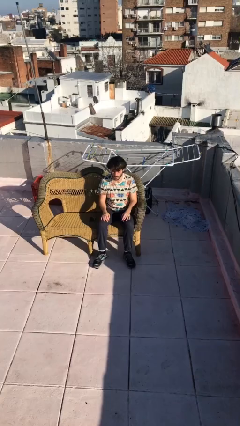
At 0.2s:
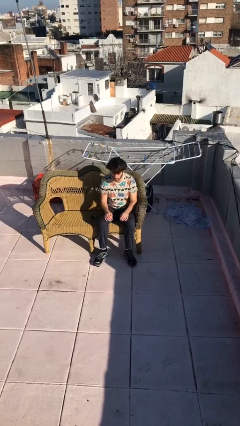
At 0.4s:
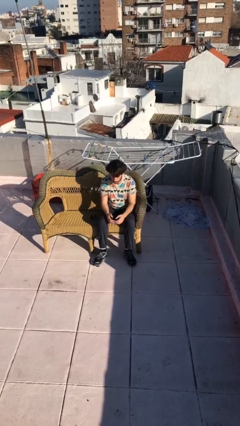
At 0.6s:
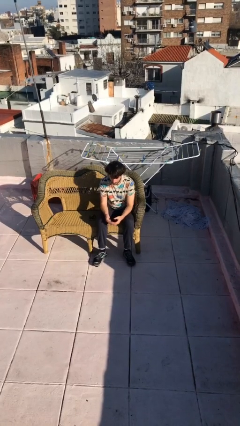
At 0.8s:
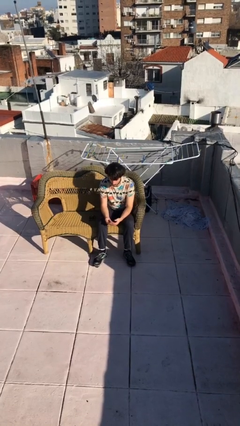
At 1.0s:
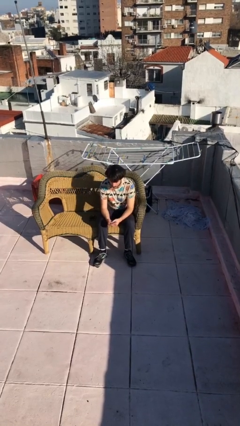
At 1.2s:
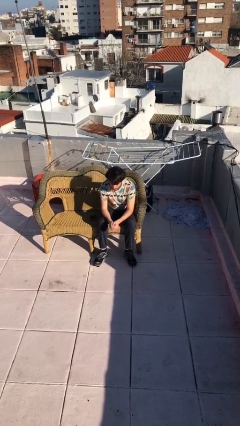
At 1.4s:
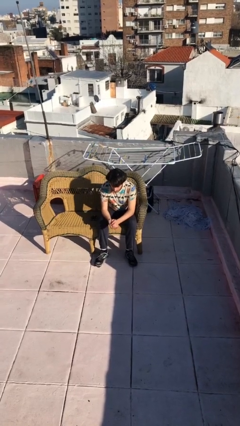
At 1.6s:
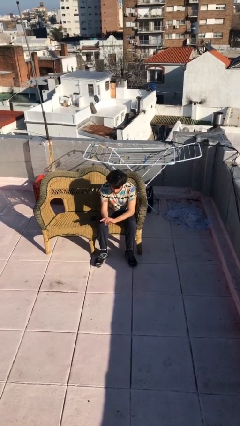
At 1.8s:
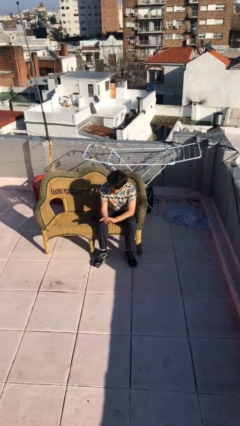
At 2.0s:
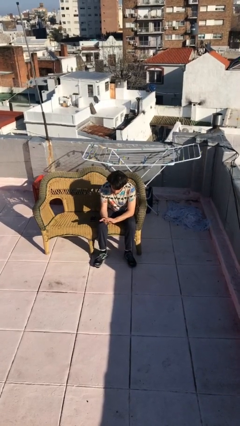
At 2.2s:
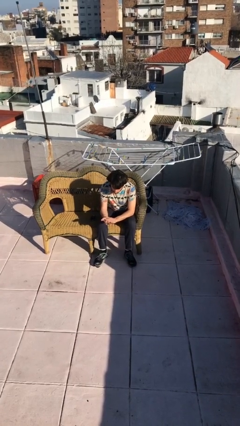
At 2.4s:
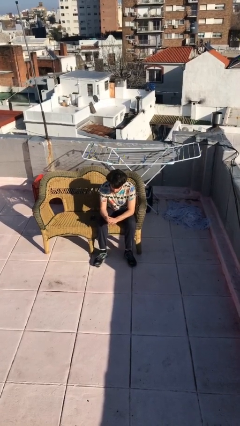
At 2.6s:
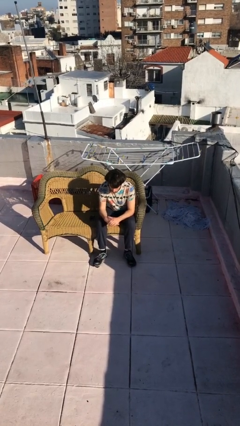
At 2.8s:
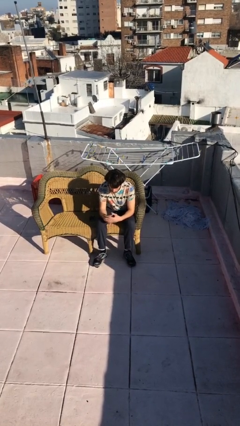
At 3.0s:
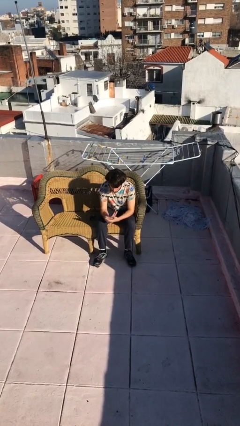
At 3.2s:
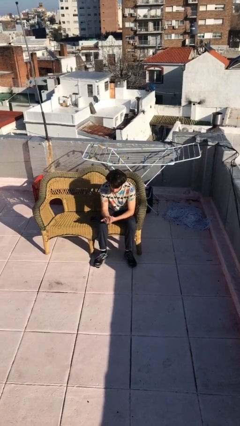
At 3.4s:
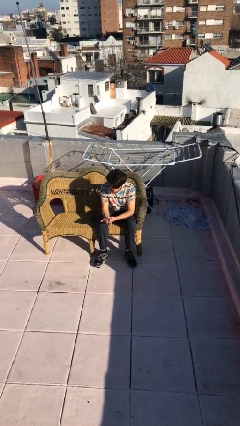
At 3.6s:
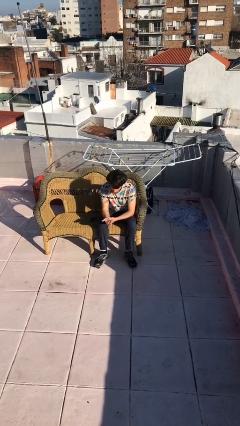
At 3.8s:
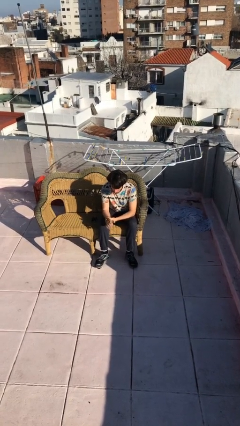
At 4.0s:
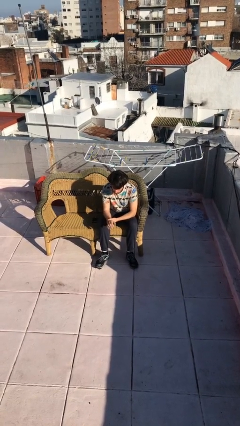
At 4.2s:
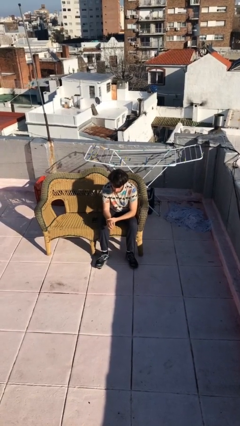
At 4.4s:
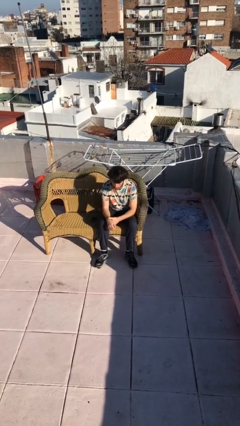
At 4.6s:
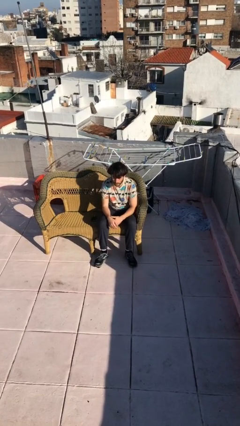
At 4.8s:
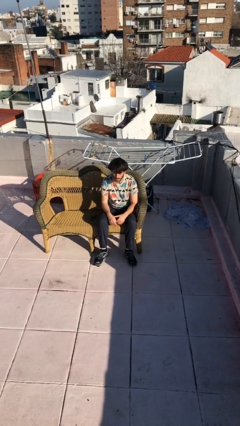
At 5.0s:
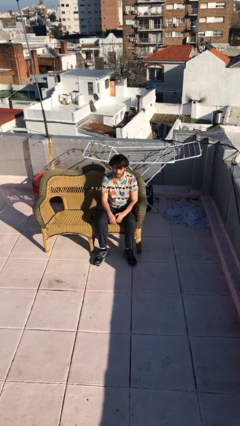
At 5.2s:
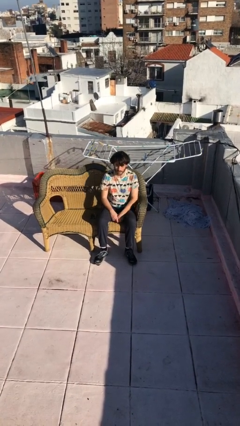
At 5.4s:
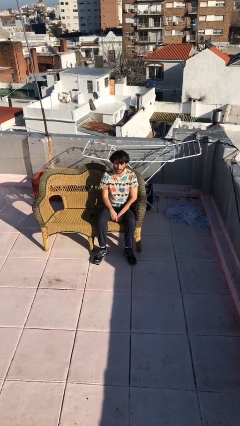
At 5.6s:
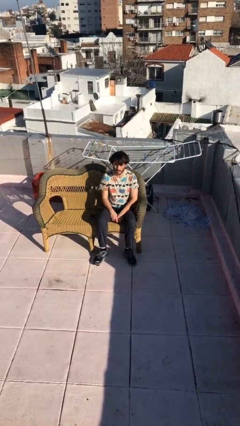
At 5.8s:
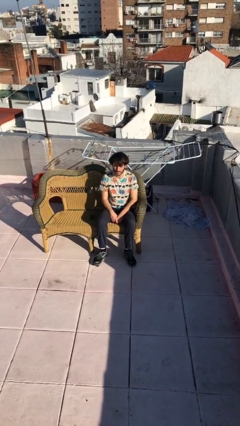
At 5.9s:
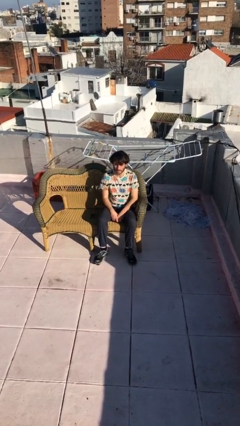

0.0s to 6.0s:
person looks at hands in lap

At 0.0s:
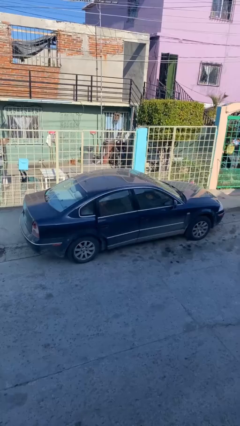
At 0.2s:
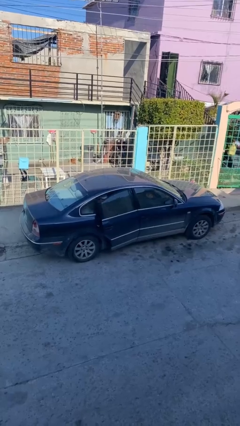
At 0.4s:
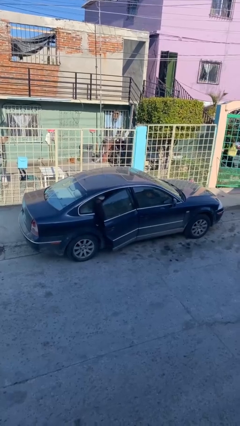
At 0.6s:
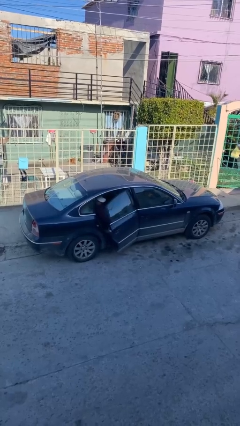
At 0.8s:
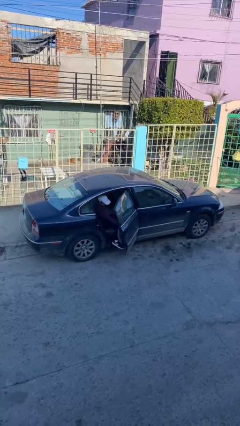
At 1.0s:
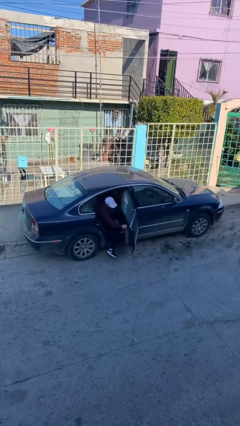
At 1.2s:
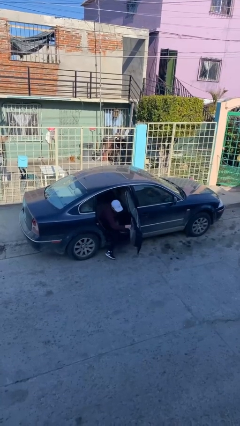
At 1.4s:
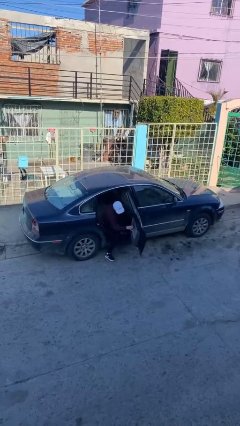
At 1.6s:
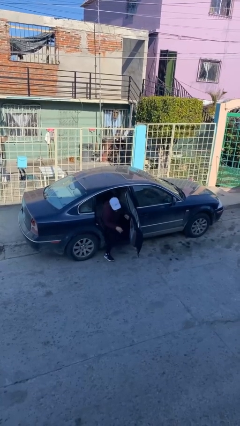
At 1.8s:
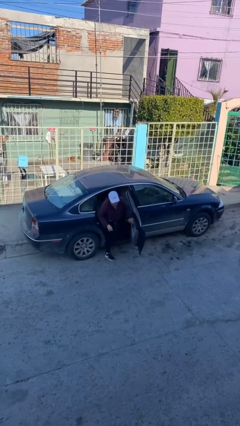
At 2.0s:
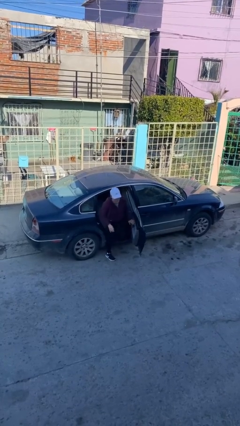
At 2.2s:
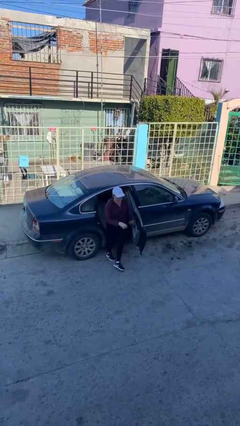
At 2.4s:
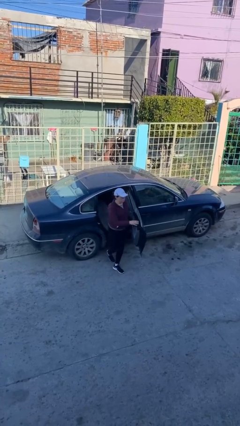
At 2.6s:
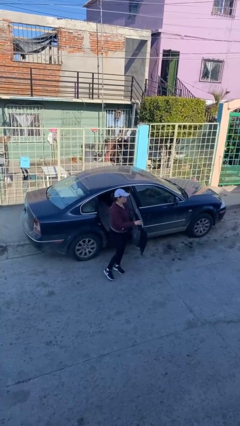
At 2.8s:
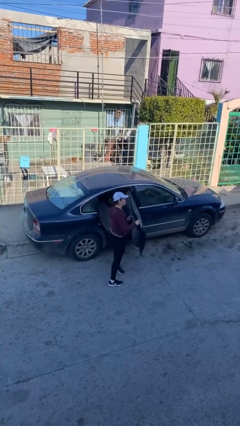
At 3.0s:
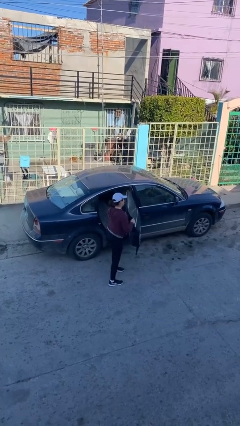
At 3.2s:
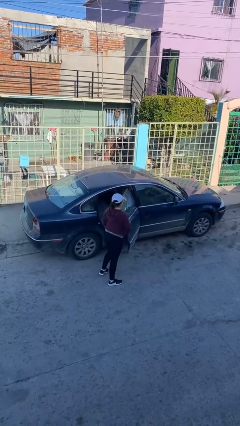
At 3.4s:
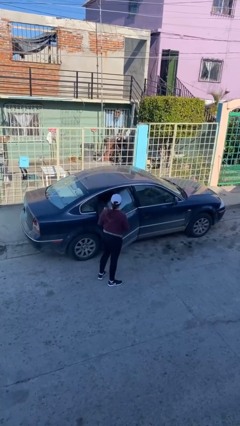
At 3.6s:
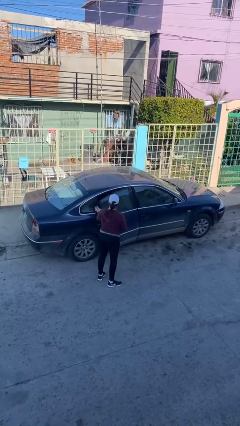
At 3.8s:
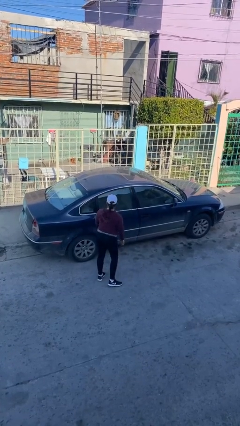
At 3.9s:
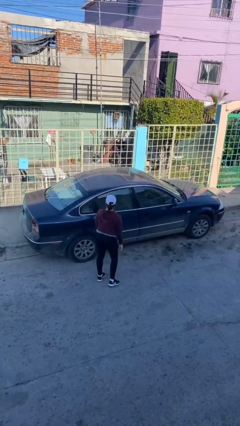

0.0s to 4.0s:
car drops off person

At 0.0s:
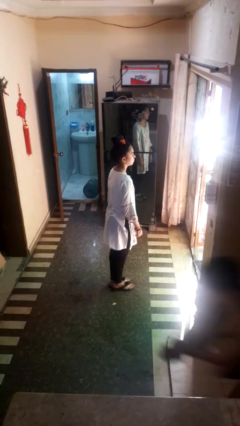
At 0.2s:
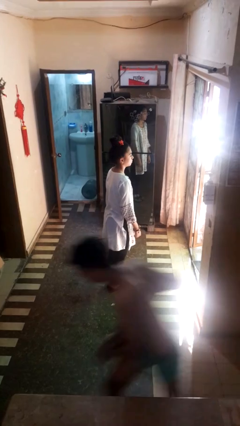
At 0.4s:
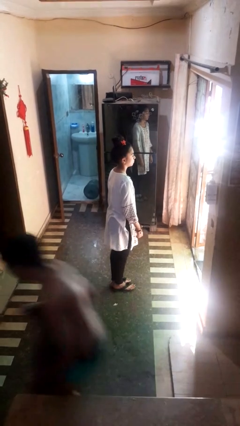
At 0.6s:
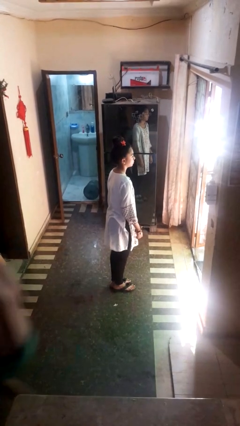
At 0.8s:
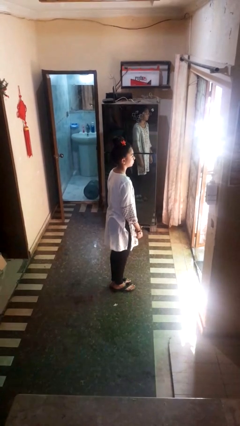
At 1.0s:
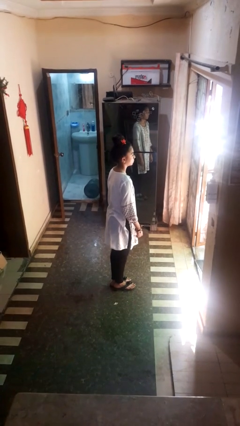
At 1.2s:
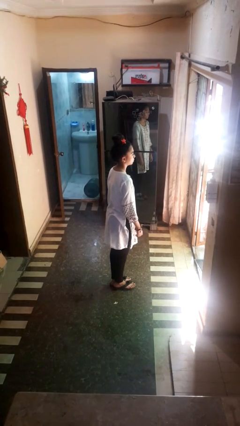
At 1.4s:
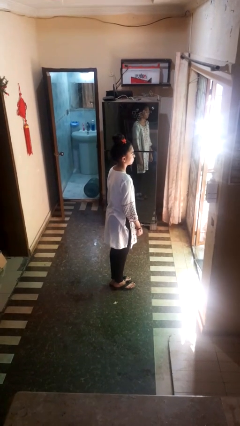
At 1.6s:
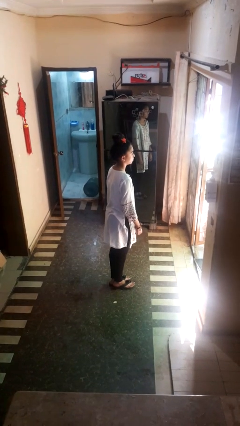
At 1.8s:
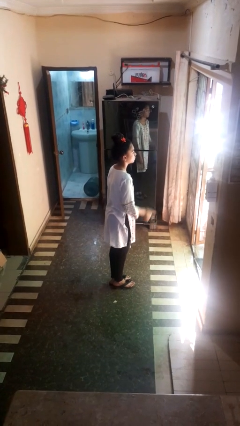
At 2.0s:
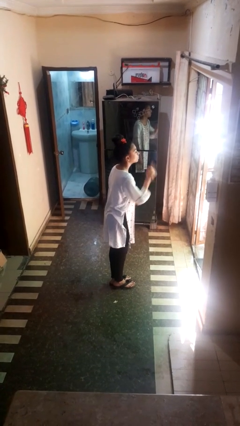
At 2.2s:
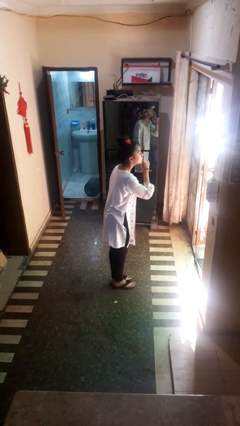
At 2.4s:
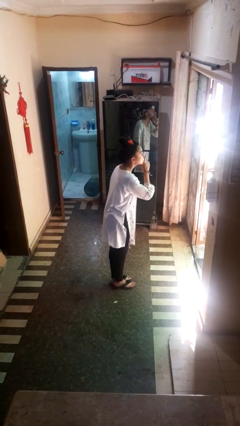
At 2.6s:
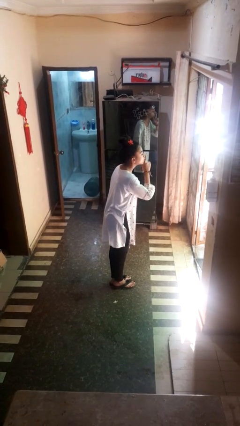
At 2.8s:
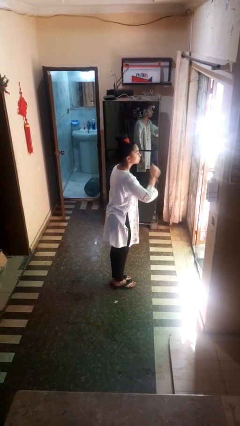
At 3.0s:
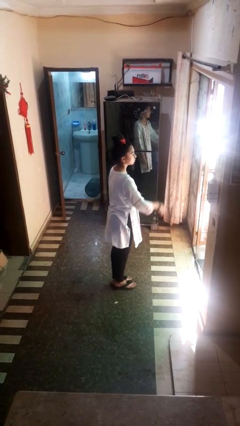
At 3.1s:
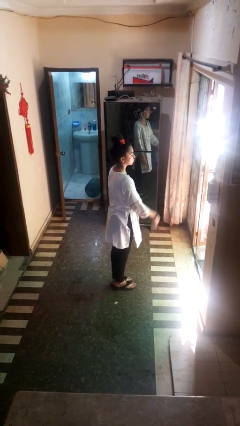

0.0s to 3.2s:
person gestures be quiet

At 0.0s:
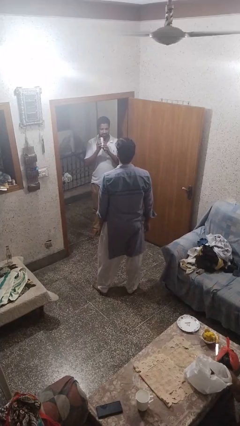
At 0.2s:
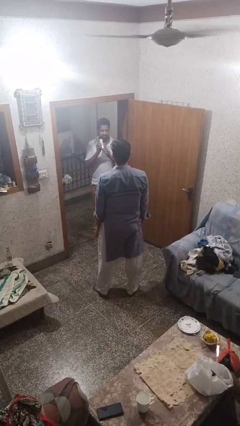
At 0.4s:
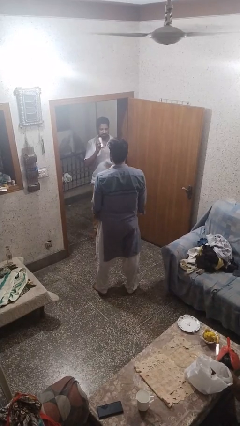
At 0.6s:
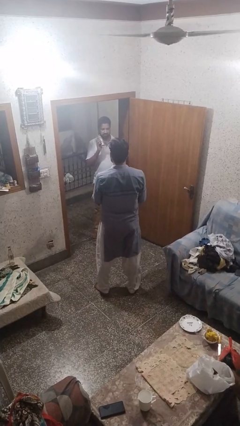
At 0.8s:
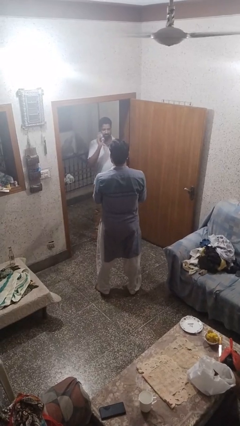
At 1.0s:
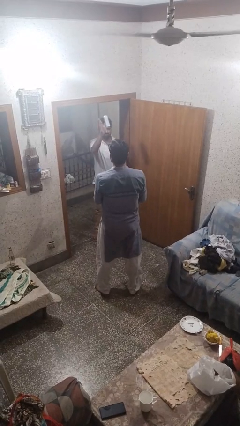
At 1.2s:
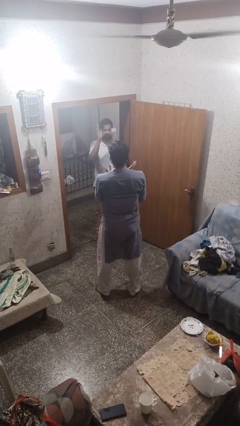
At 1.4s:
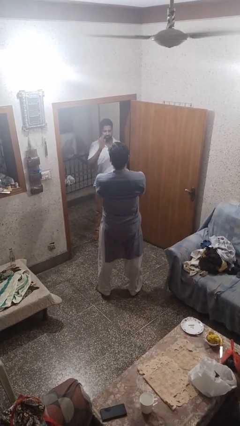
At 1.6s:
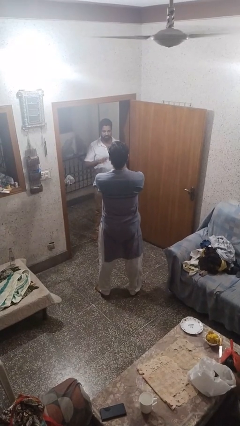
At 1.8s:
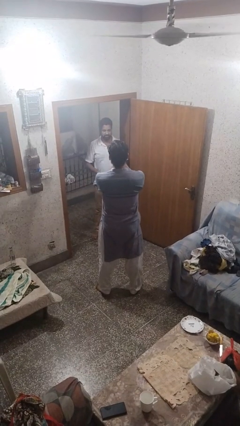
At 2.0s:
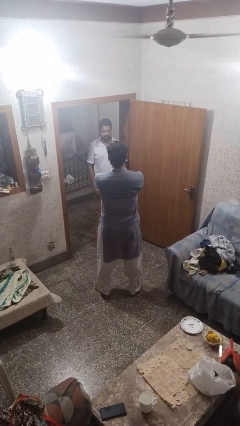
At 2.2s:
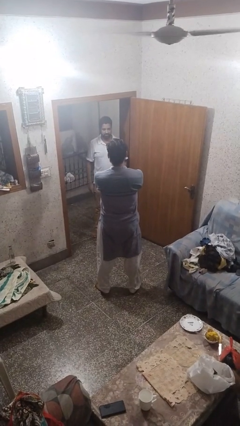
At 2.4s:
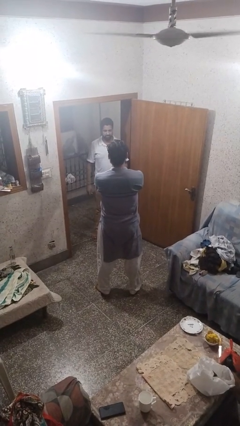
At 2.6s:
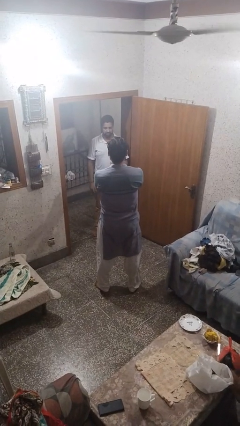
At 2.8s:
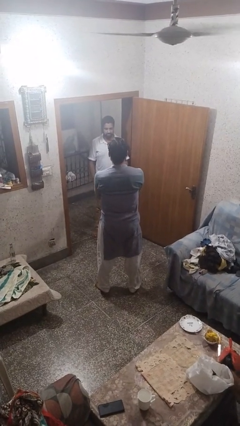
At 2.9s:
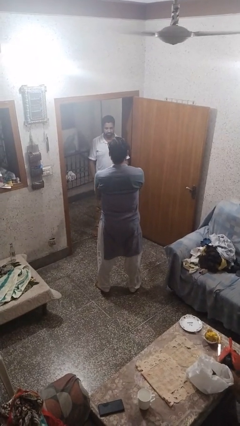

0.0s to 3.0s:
person catches object from person

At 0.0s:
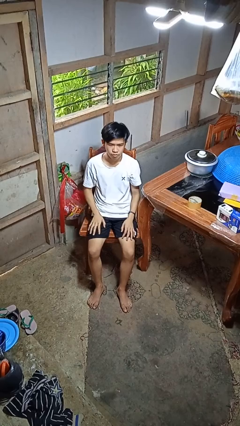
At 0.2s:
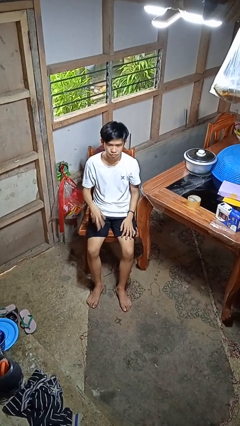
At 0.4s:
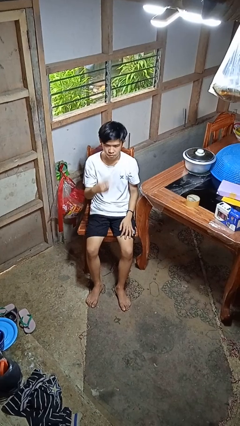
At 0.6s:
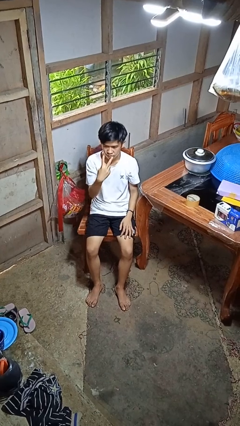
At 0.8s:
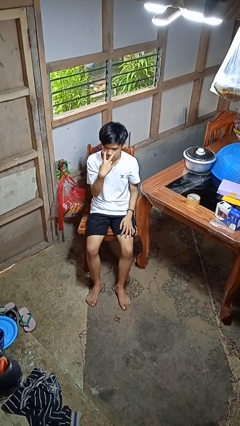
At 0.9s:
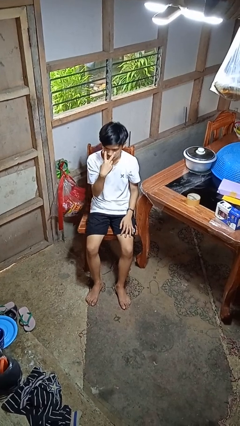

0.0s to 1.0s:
person gestures watch closely

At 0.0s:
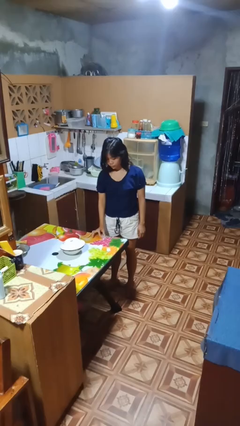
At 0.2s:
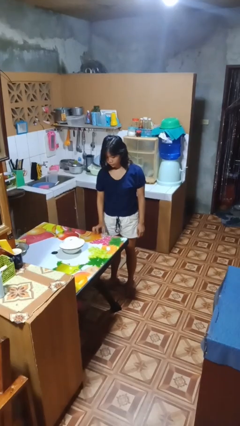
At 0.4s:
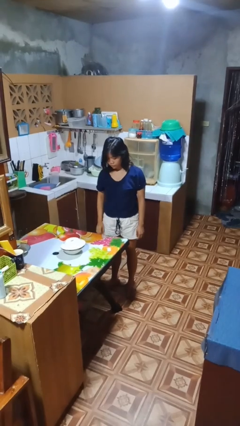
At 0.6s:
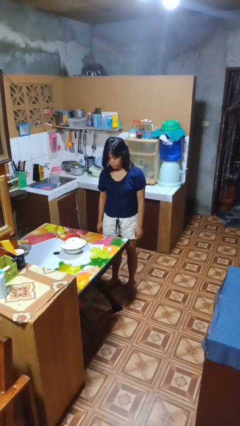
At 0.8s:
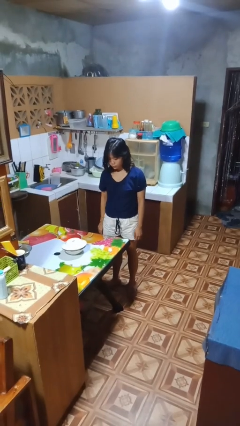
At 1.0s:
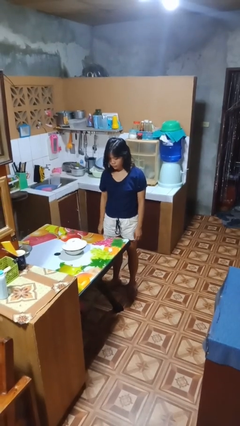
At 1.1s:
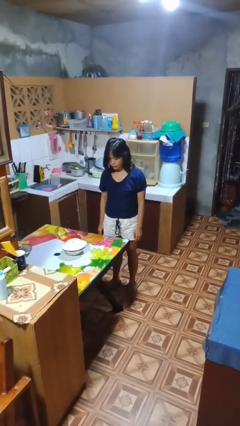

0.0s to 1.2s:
person puts down object on table
